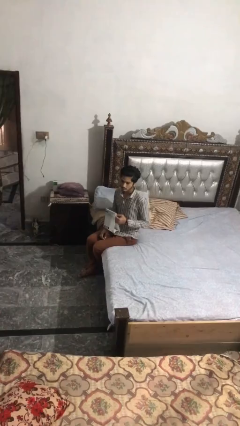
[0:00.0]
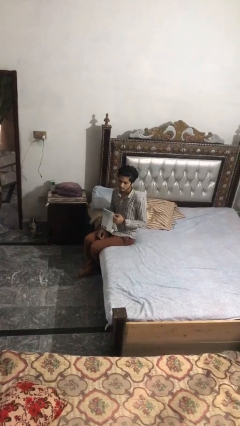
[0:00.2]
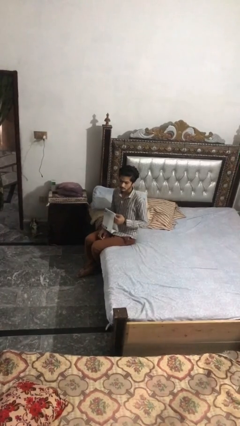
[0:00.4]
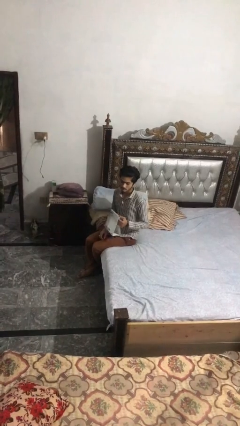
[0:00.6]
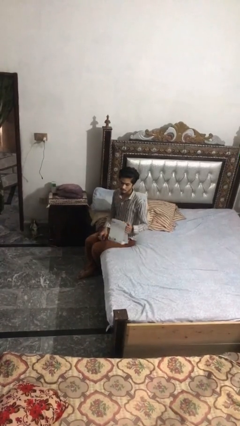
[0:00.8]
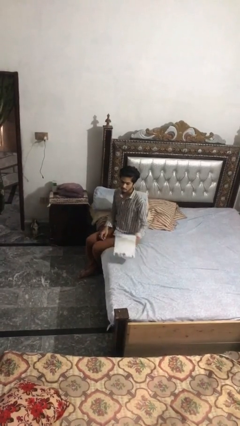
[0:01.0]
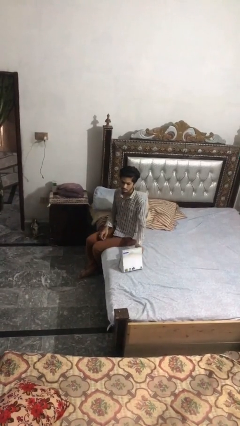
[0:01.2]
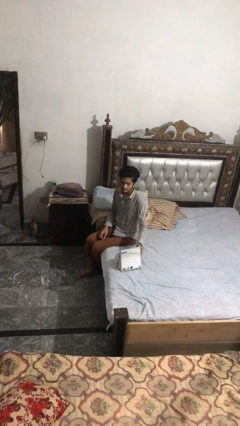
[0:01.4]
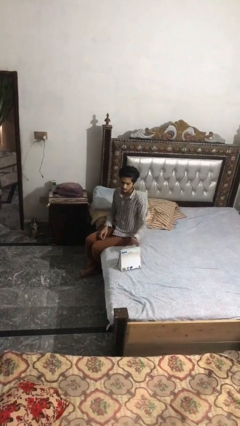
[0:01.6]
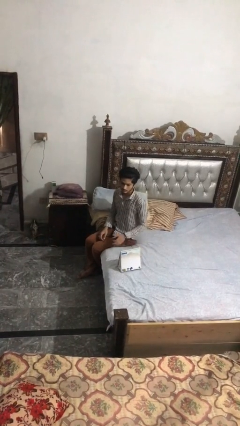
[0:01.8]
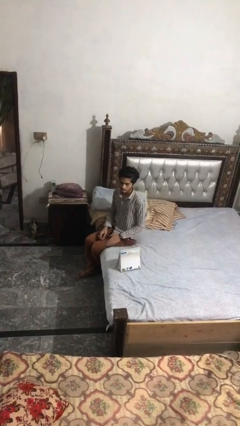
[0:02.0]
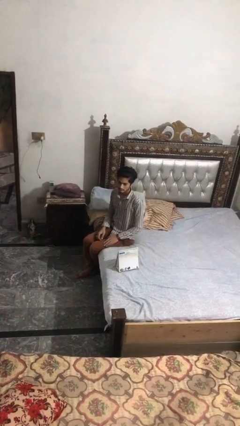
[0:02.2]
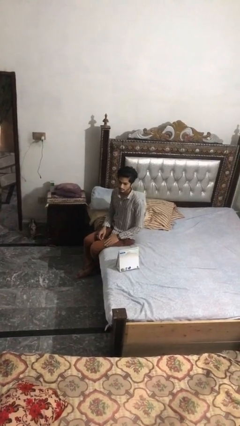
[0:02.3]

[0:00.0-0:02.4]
person puts down object on bed

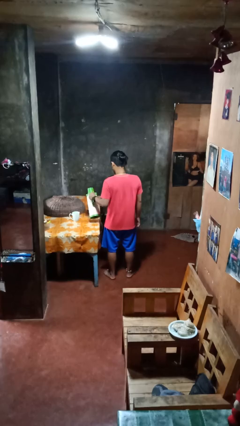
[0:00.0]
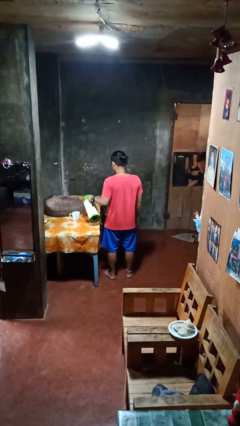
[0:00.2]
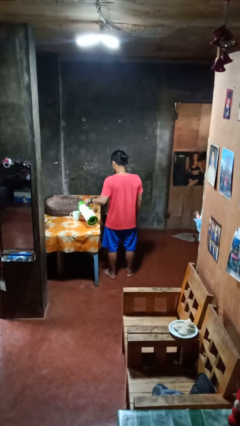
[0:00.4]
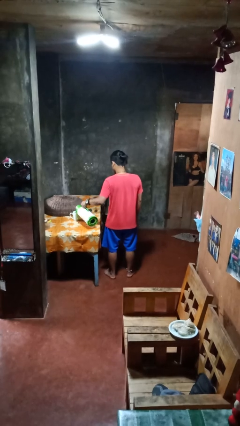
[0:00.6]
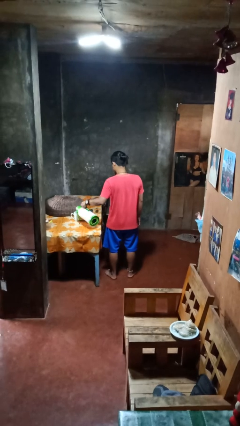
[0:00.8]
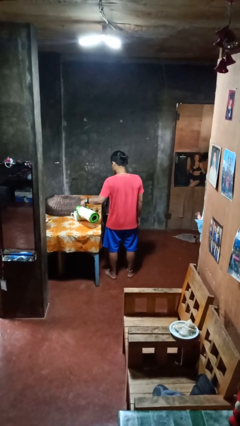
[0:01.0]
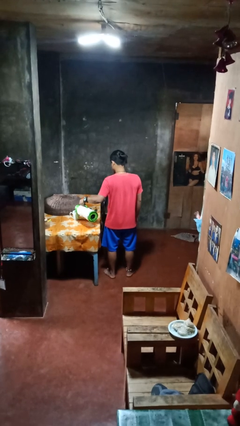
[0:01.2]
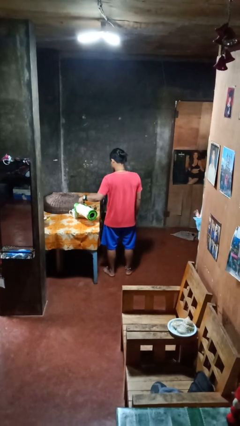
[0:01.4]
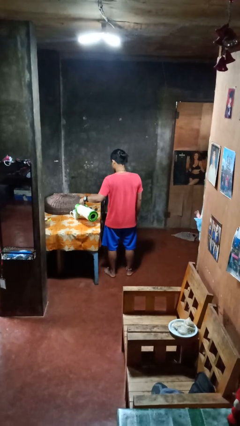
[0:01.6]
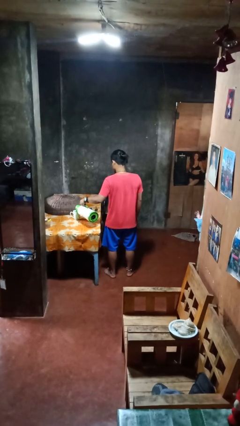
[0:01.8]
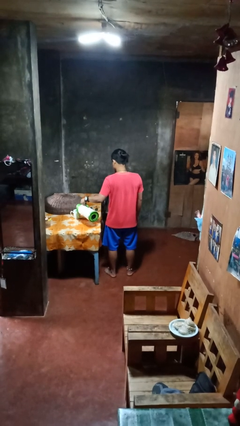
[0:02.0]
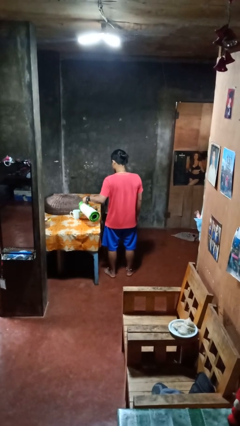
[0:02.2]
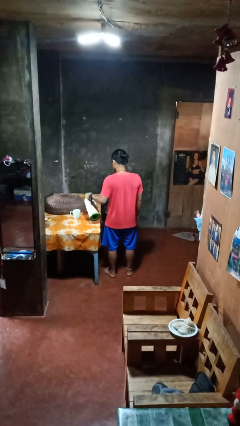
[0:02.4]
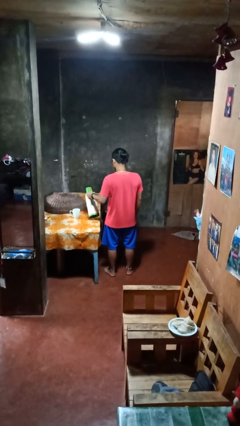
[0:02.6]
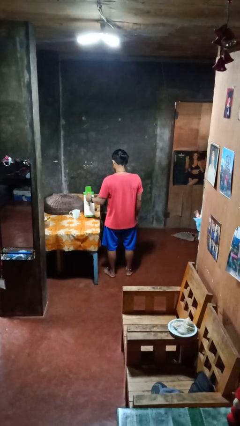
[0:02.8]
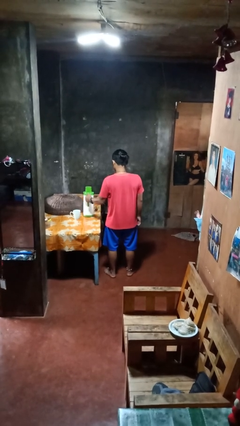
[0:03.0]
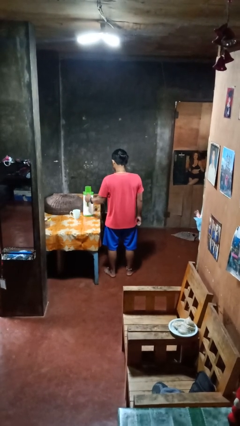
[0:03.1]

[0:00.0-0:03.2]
person pours coffee into mug

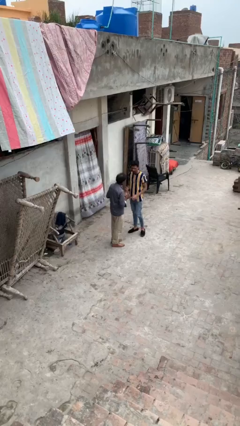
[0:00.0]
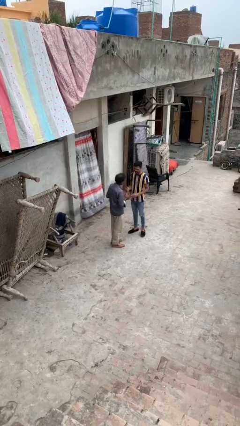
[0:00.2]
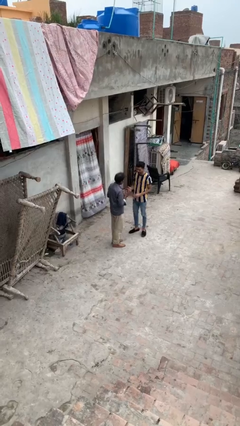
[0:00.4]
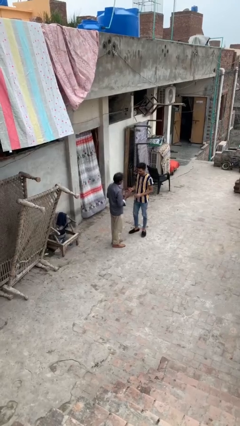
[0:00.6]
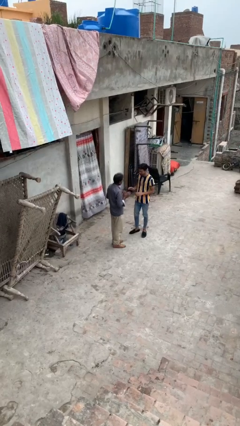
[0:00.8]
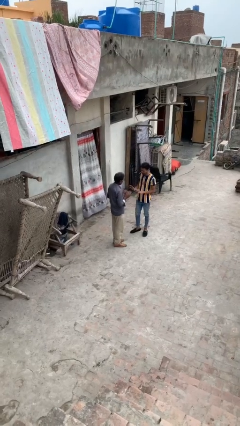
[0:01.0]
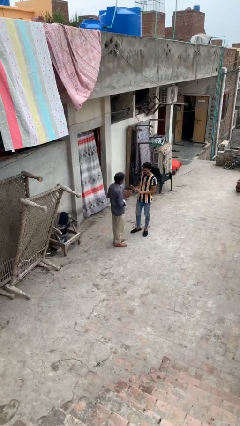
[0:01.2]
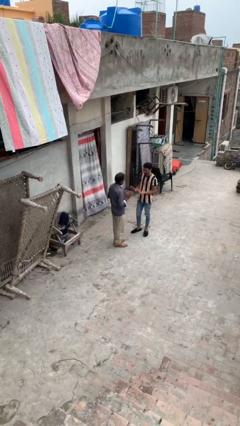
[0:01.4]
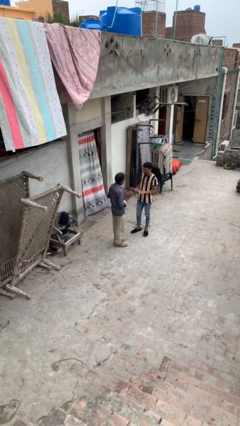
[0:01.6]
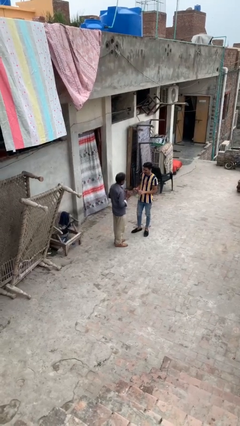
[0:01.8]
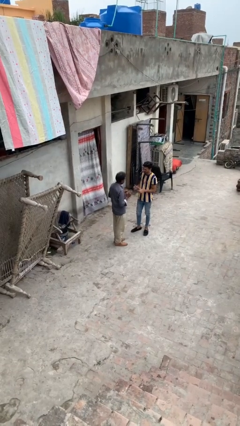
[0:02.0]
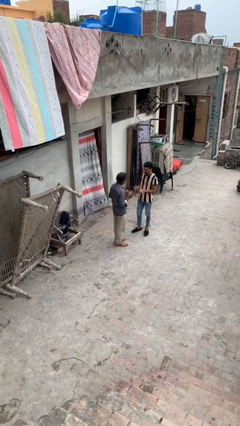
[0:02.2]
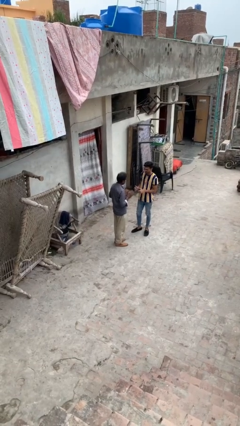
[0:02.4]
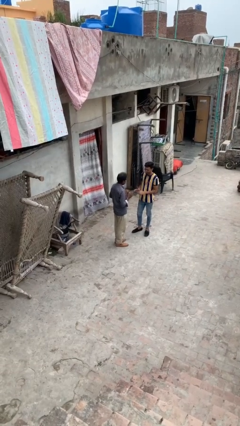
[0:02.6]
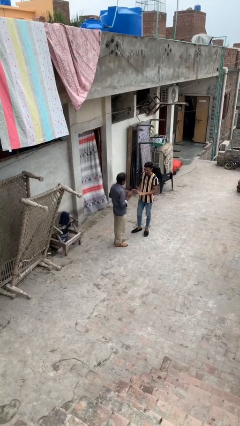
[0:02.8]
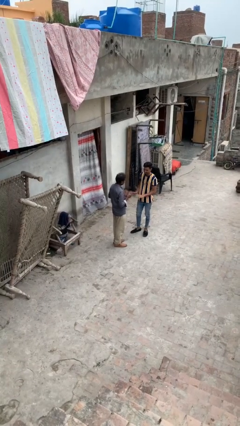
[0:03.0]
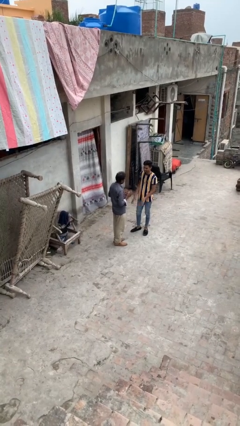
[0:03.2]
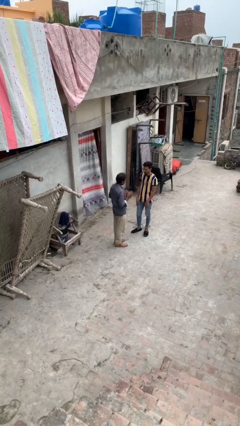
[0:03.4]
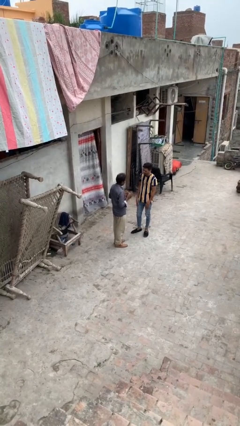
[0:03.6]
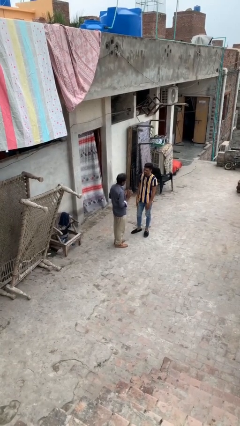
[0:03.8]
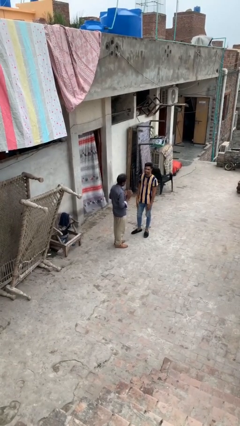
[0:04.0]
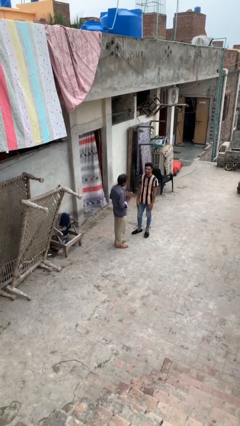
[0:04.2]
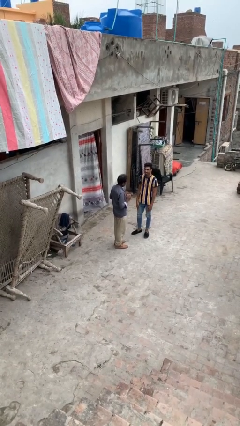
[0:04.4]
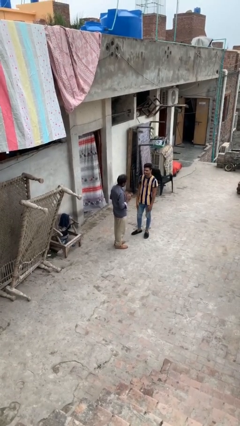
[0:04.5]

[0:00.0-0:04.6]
person talks to person

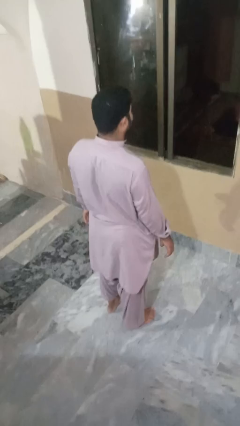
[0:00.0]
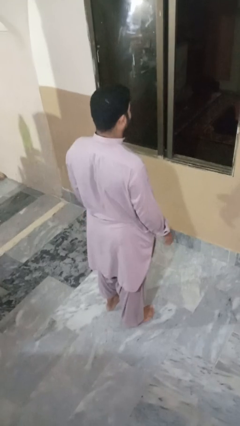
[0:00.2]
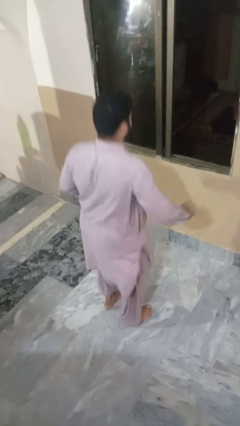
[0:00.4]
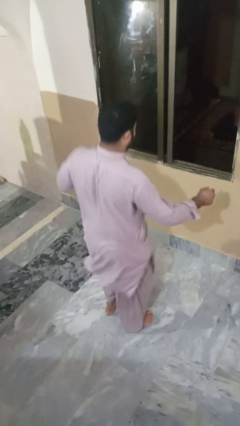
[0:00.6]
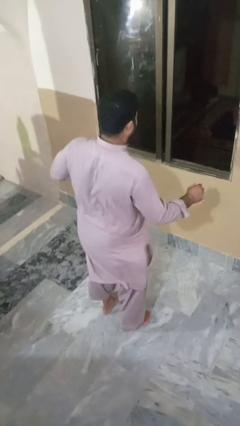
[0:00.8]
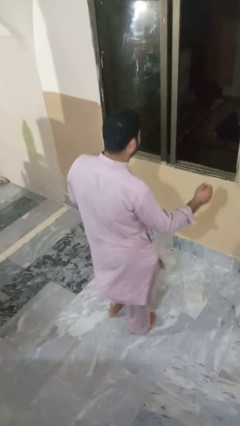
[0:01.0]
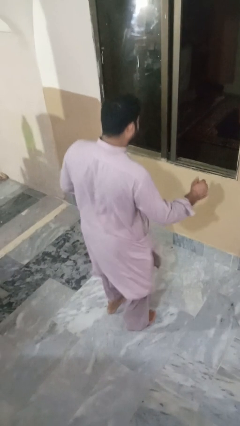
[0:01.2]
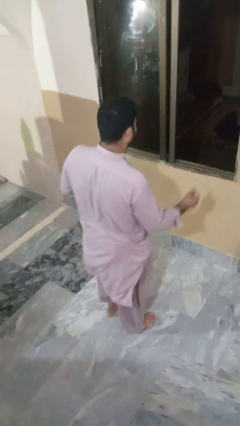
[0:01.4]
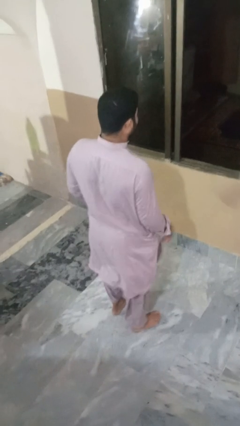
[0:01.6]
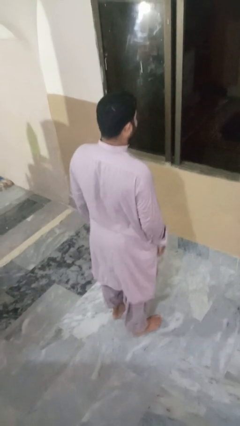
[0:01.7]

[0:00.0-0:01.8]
person wiggles hips

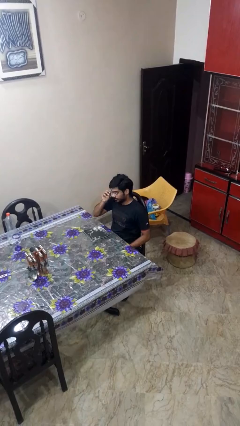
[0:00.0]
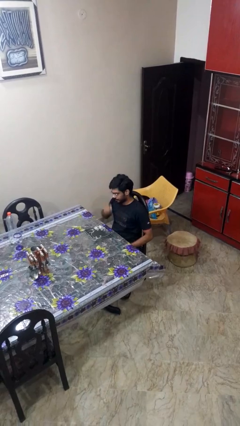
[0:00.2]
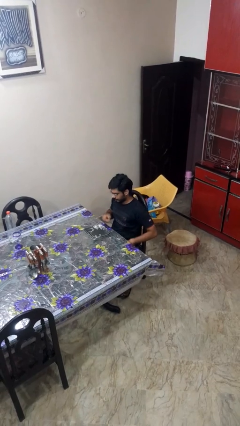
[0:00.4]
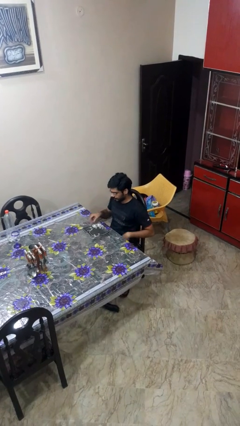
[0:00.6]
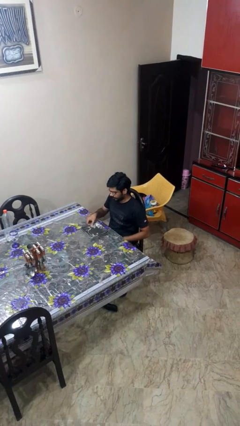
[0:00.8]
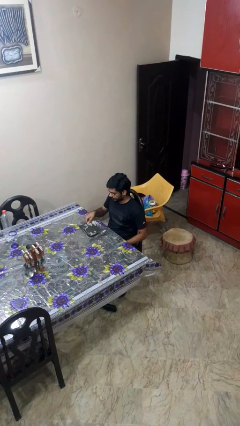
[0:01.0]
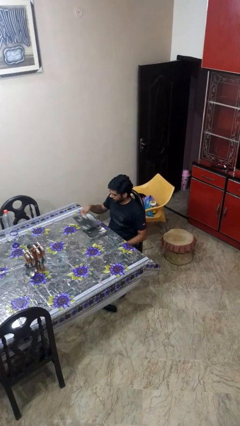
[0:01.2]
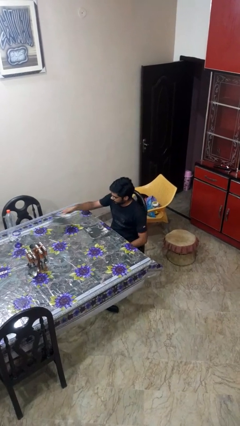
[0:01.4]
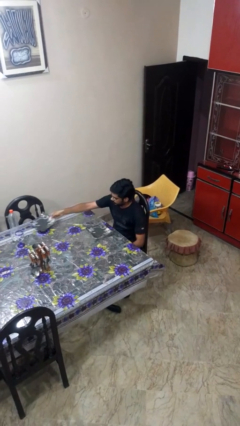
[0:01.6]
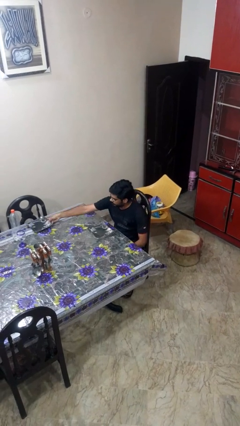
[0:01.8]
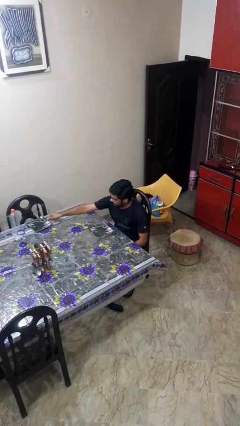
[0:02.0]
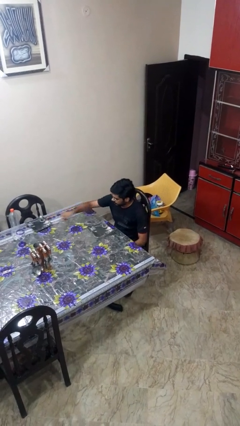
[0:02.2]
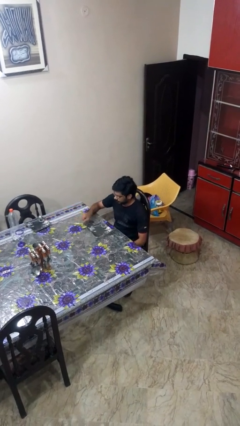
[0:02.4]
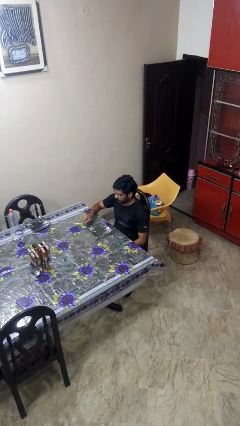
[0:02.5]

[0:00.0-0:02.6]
person sets table

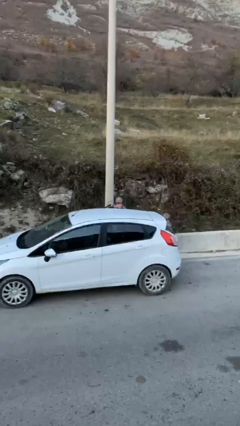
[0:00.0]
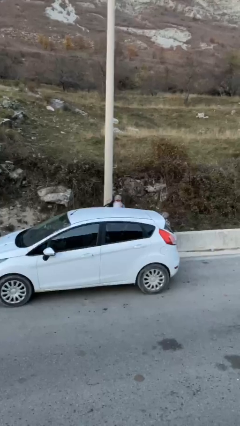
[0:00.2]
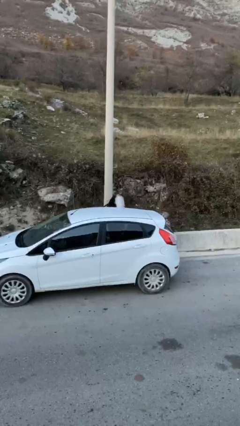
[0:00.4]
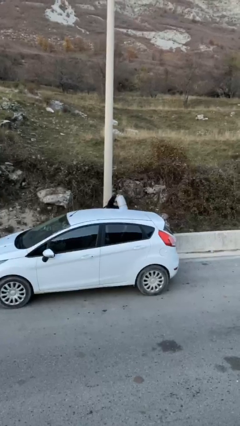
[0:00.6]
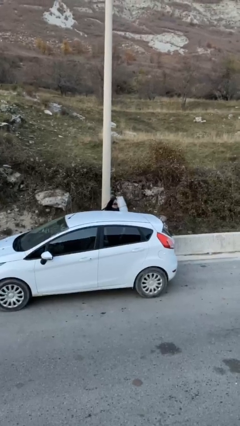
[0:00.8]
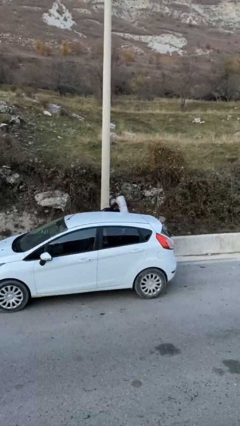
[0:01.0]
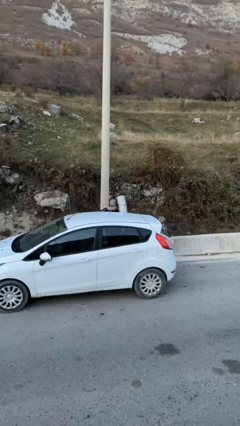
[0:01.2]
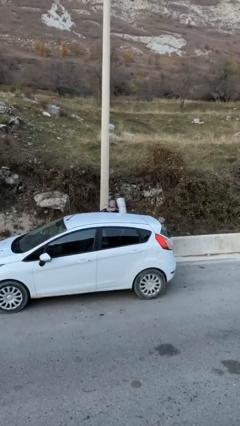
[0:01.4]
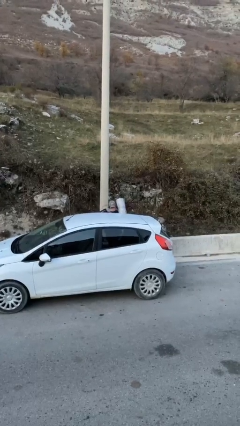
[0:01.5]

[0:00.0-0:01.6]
person unloads car

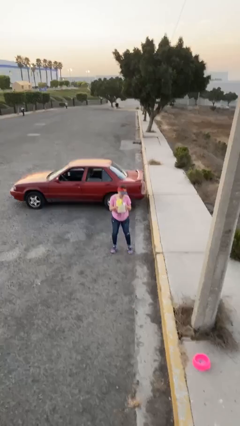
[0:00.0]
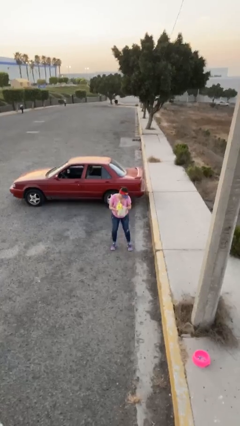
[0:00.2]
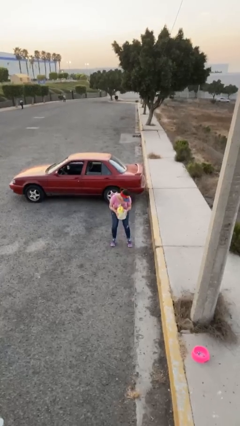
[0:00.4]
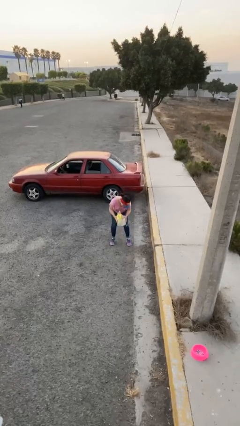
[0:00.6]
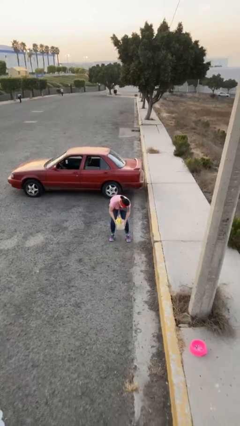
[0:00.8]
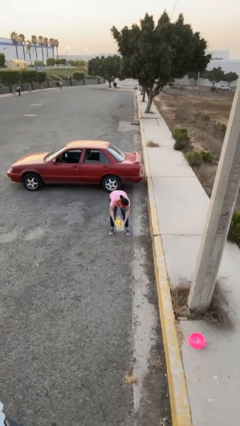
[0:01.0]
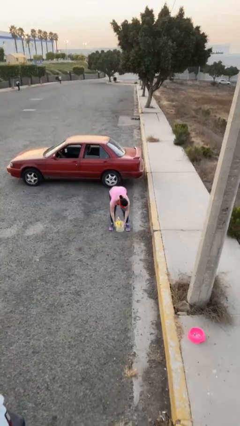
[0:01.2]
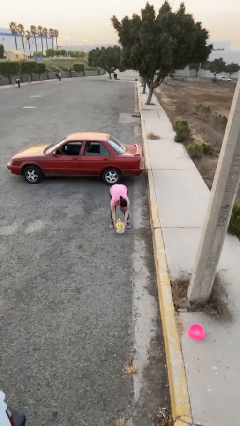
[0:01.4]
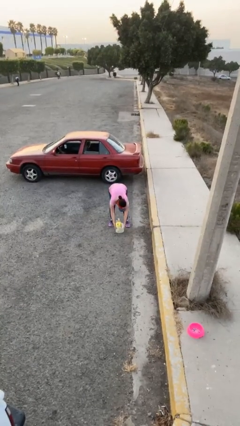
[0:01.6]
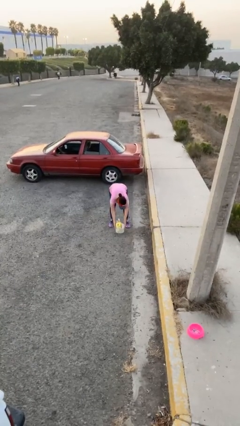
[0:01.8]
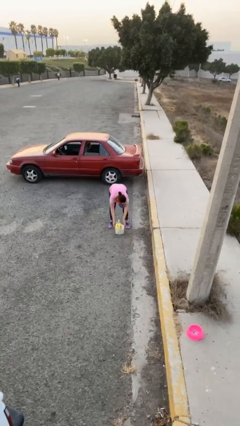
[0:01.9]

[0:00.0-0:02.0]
person puts down object on floor
